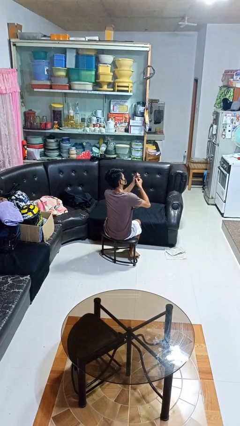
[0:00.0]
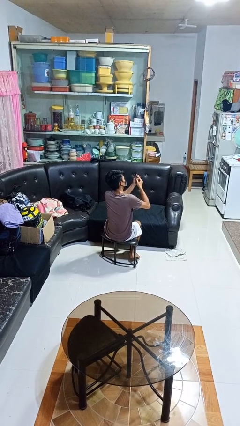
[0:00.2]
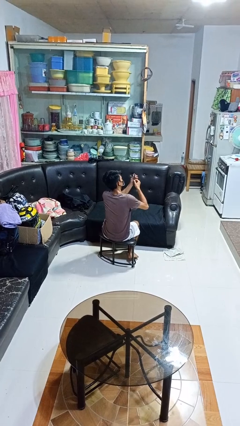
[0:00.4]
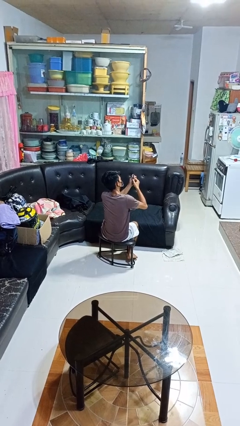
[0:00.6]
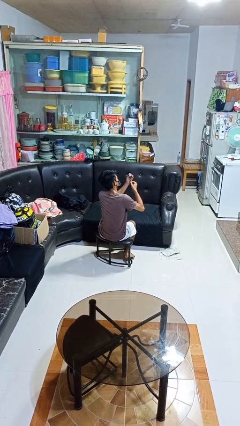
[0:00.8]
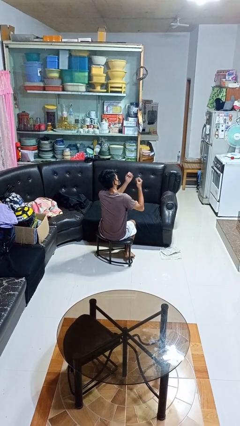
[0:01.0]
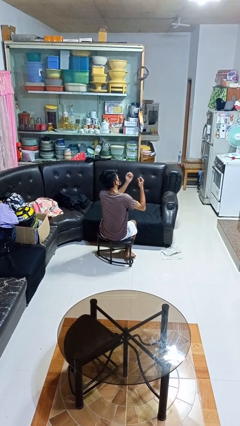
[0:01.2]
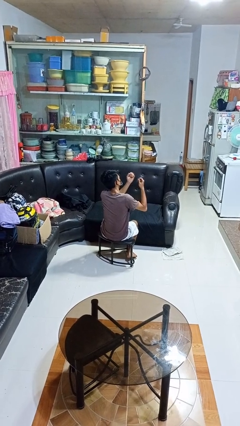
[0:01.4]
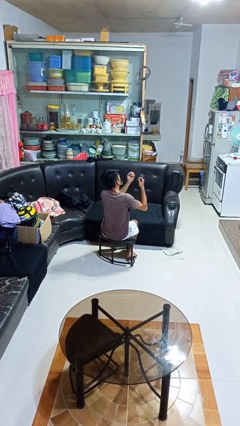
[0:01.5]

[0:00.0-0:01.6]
person files fingernails

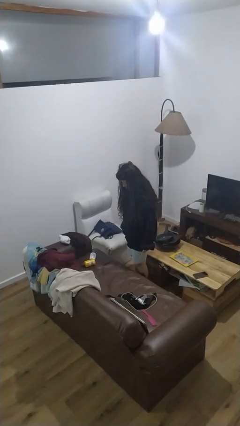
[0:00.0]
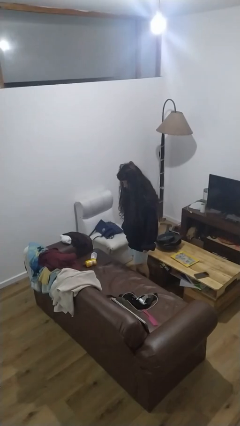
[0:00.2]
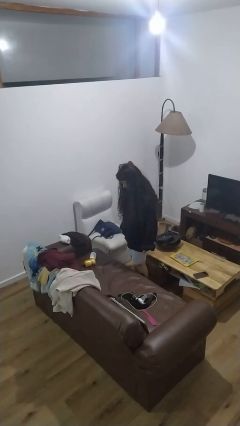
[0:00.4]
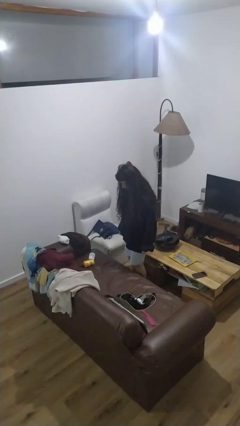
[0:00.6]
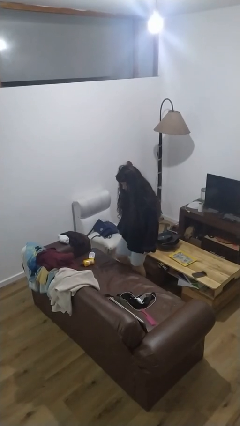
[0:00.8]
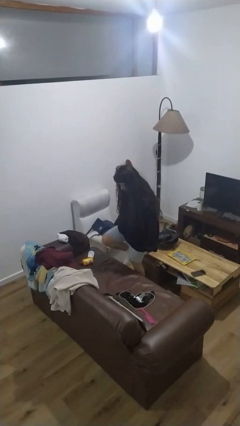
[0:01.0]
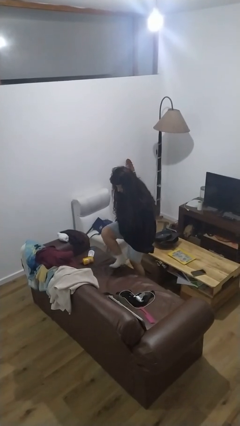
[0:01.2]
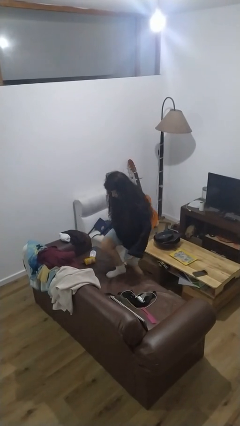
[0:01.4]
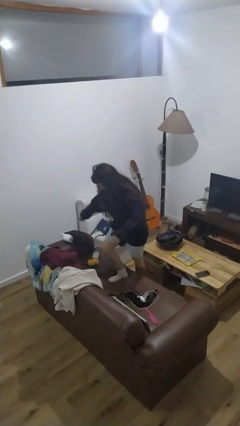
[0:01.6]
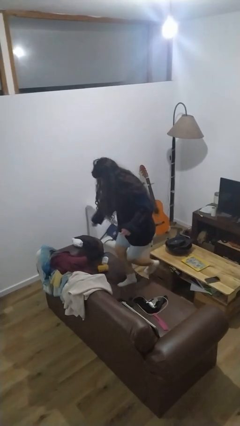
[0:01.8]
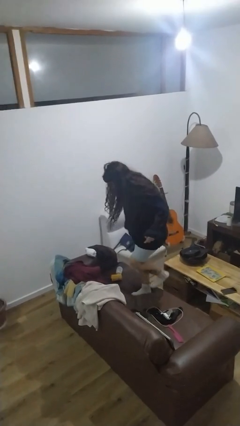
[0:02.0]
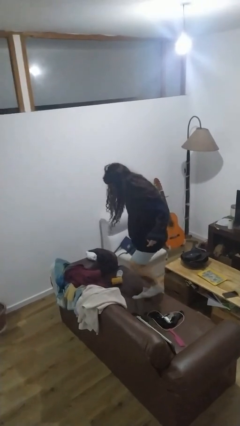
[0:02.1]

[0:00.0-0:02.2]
person climbs on couch

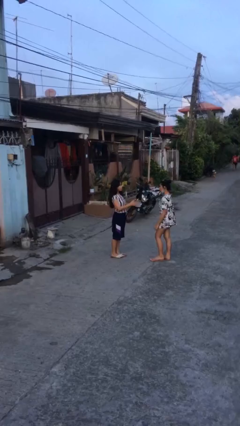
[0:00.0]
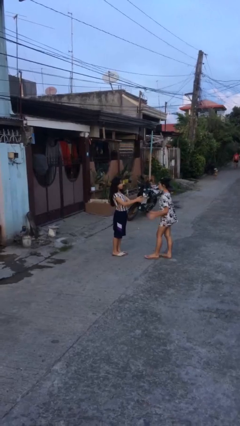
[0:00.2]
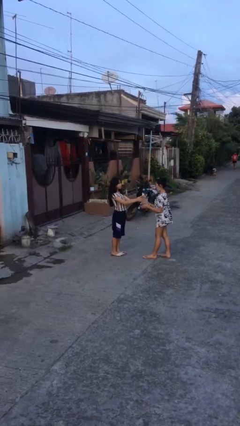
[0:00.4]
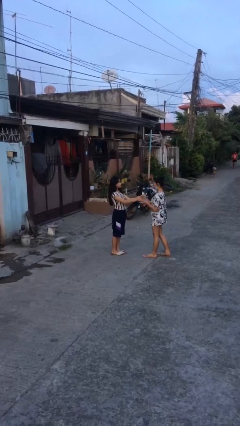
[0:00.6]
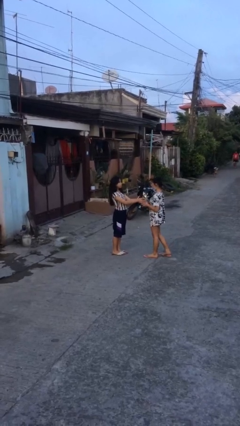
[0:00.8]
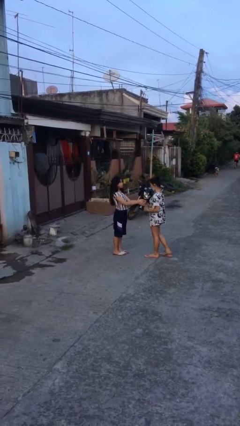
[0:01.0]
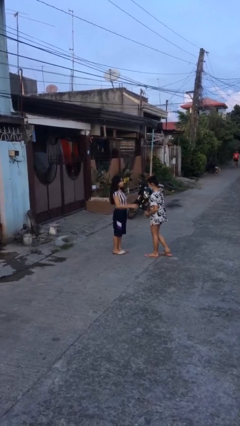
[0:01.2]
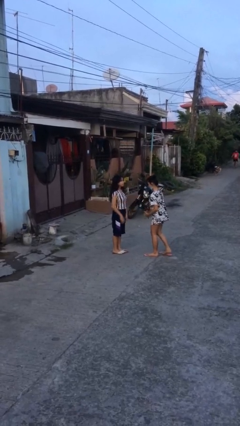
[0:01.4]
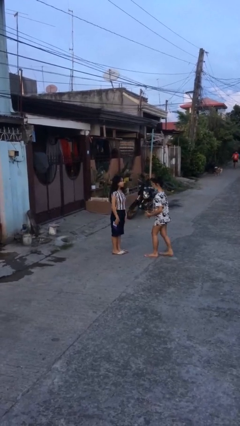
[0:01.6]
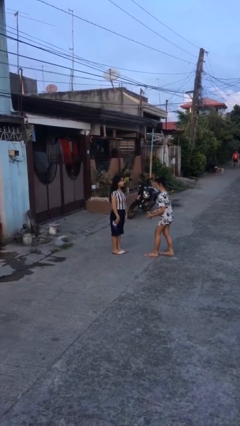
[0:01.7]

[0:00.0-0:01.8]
person transfers object to person

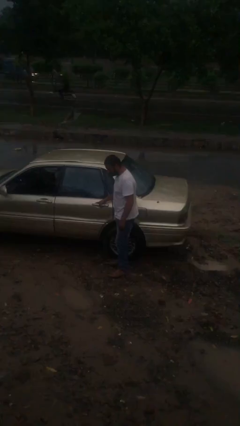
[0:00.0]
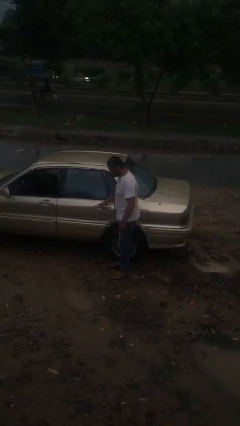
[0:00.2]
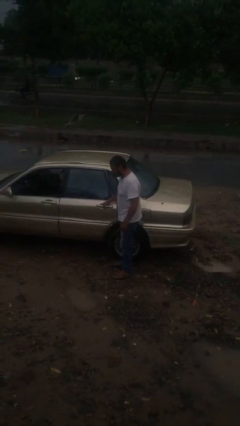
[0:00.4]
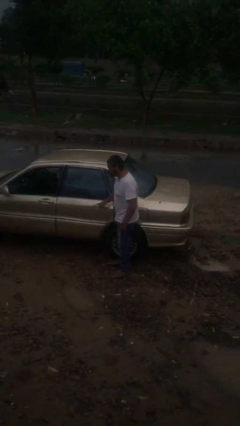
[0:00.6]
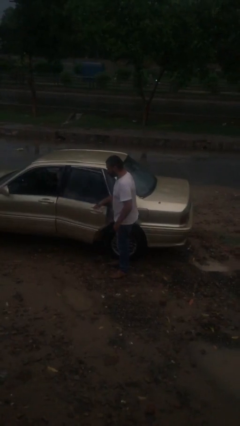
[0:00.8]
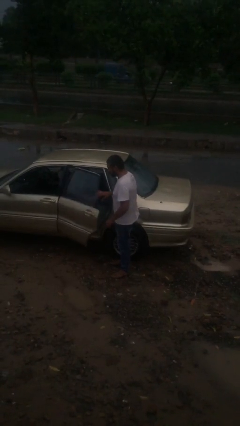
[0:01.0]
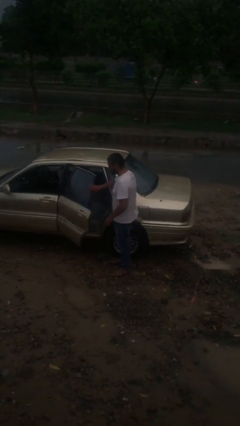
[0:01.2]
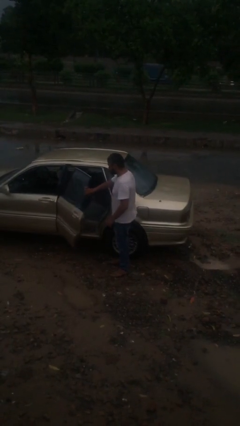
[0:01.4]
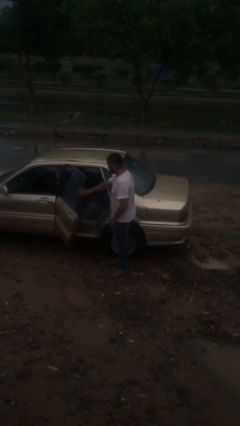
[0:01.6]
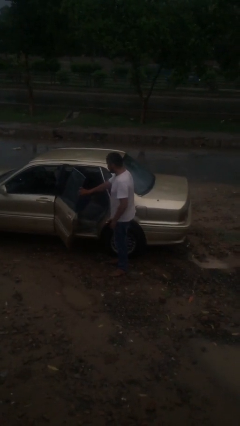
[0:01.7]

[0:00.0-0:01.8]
person opens car door

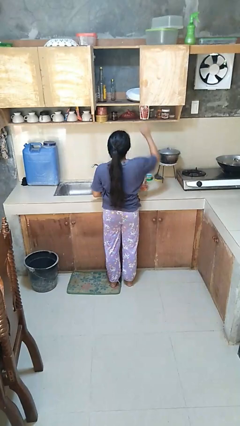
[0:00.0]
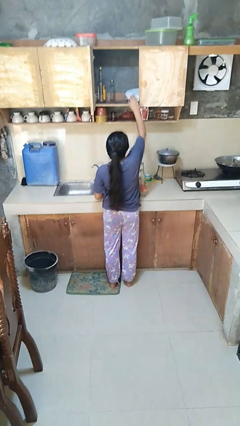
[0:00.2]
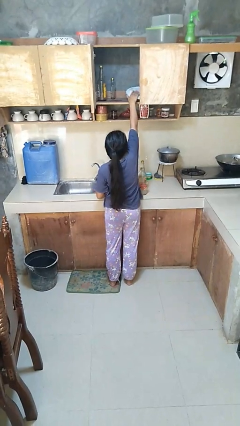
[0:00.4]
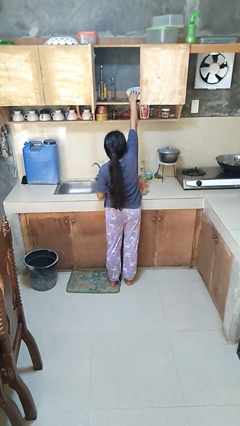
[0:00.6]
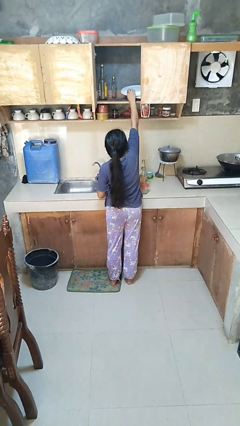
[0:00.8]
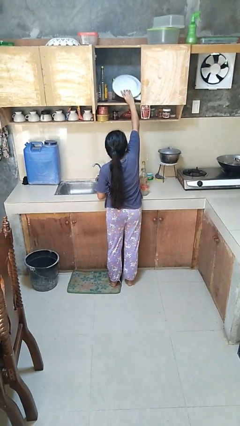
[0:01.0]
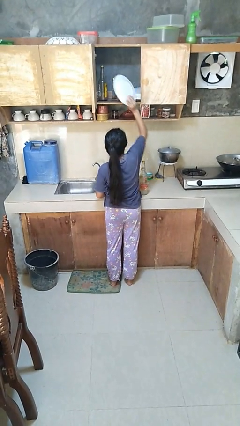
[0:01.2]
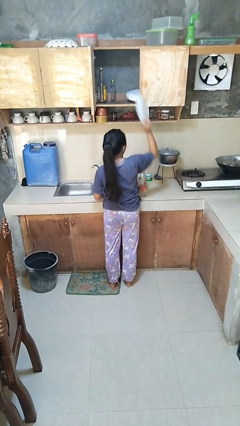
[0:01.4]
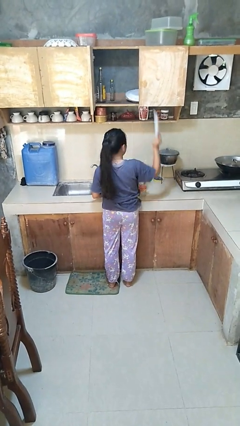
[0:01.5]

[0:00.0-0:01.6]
person takes object from cabinet

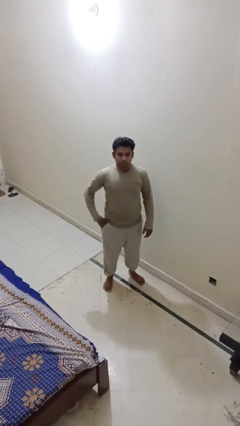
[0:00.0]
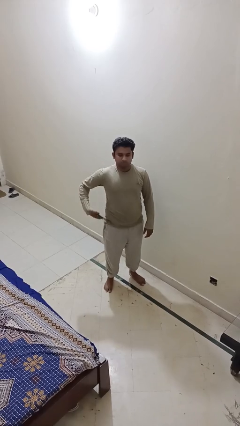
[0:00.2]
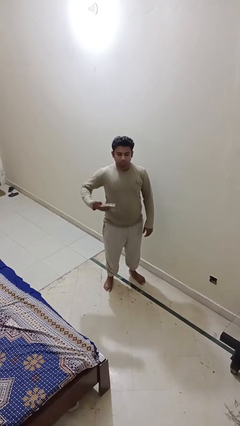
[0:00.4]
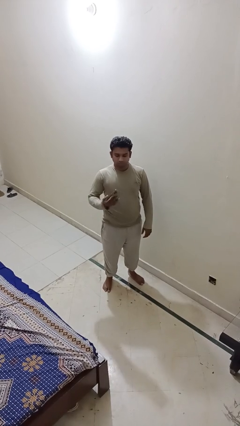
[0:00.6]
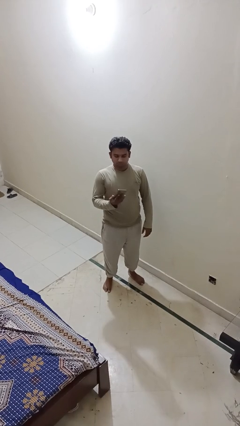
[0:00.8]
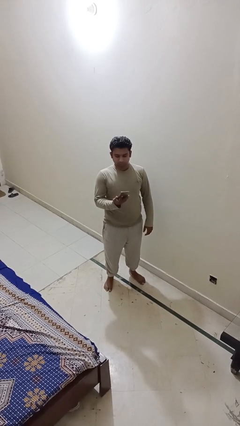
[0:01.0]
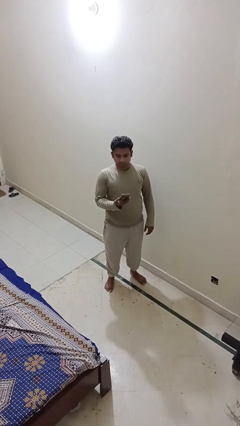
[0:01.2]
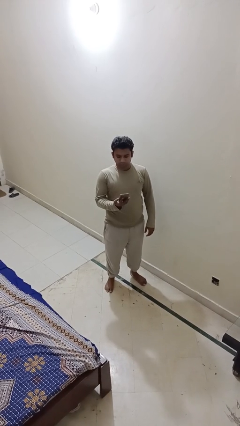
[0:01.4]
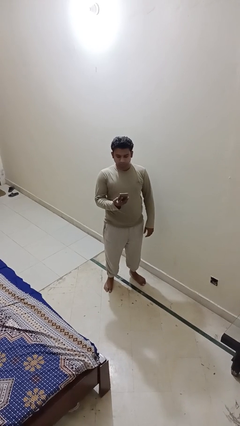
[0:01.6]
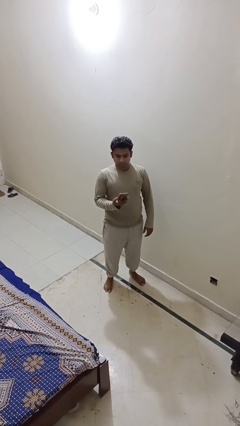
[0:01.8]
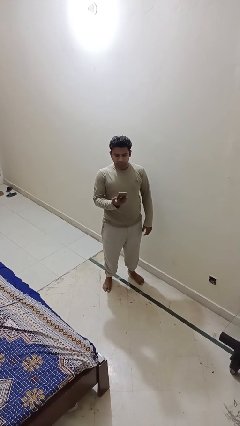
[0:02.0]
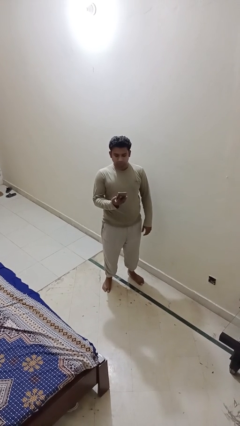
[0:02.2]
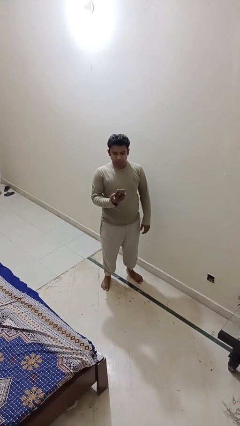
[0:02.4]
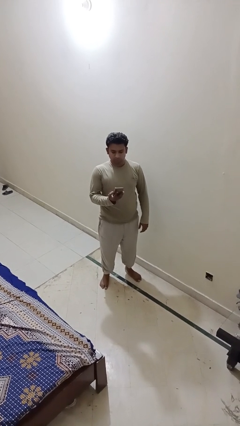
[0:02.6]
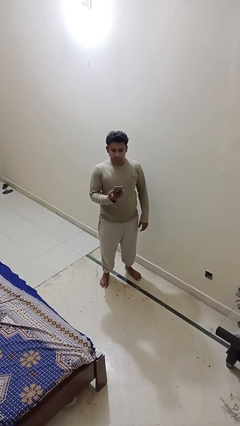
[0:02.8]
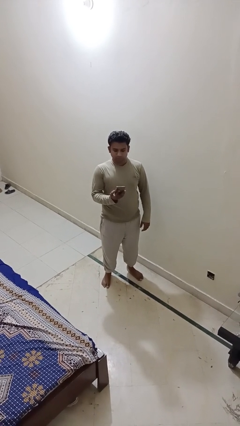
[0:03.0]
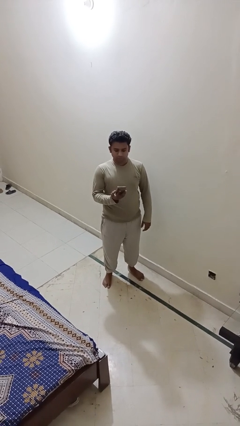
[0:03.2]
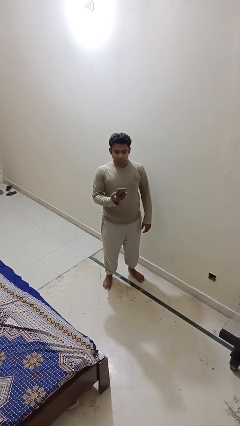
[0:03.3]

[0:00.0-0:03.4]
person takes phone from pocket

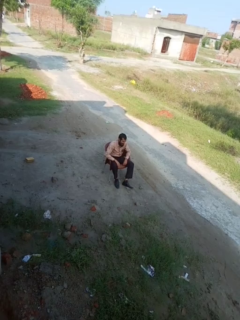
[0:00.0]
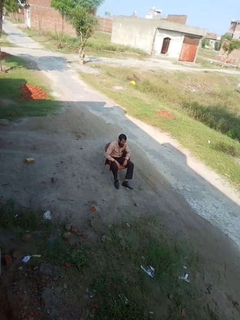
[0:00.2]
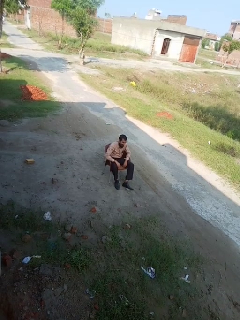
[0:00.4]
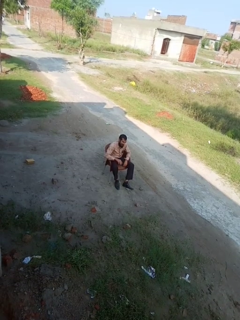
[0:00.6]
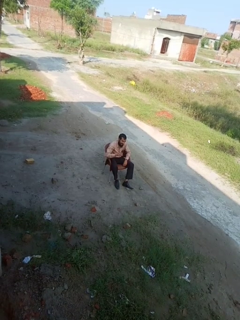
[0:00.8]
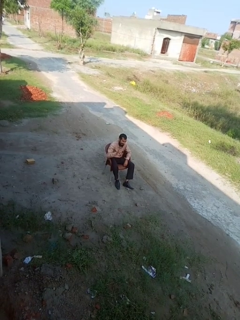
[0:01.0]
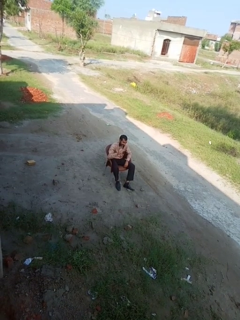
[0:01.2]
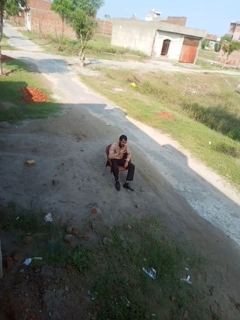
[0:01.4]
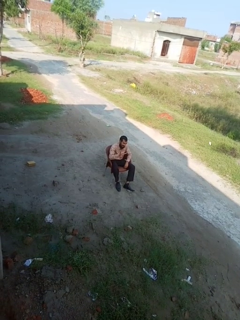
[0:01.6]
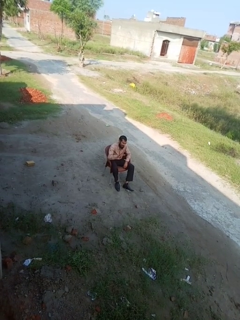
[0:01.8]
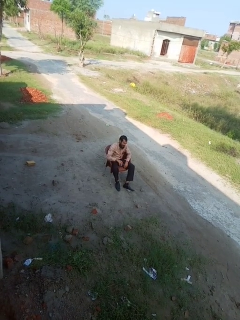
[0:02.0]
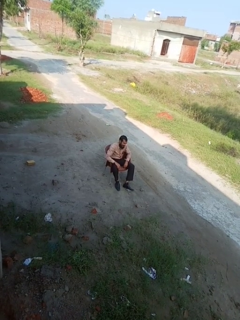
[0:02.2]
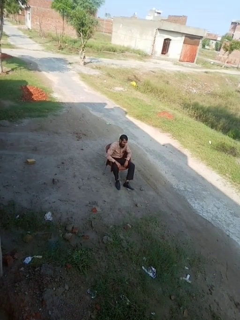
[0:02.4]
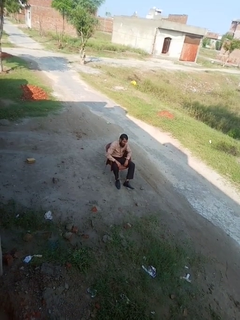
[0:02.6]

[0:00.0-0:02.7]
person gestures number five

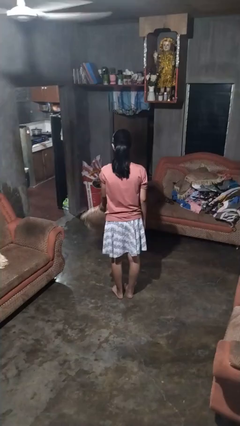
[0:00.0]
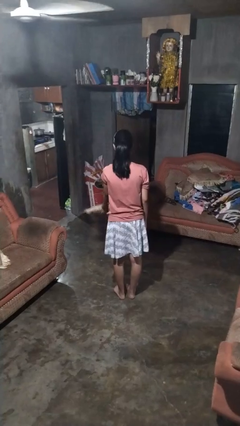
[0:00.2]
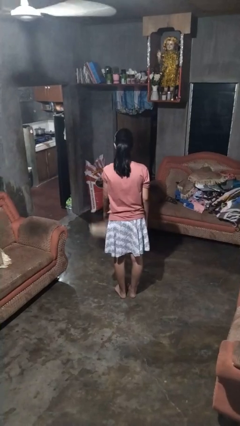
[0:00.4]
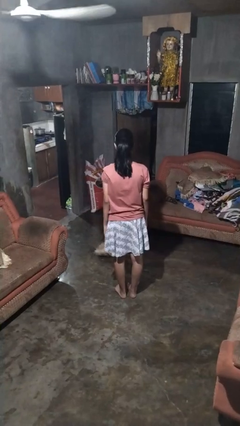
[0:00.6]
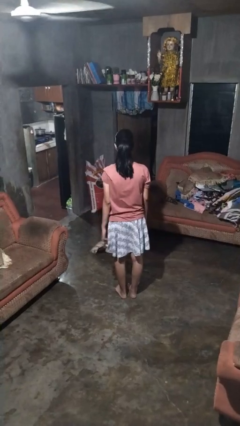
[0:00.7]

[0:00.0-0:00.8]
person throws object to ground

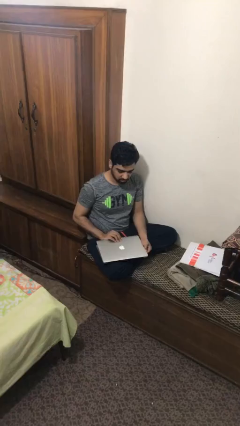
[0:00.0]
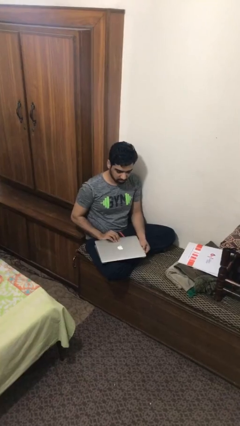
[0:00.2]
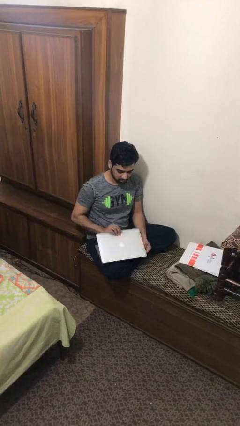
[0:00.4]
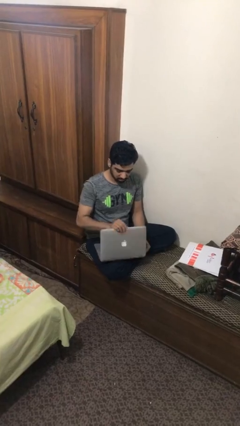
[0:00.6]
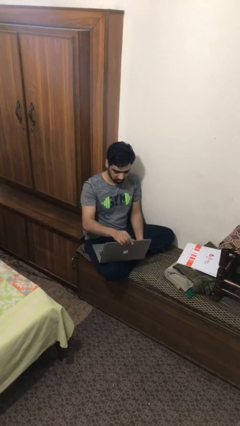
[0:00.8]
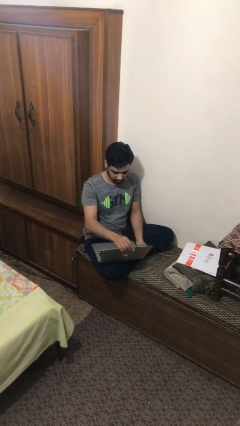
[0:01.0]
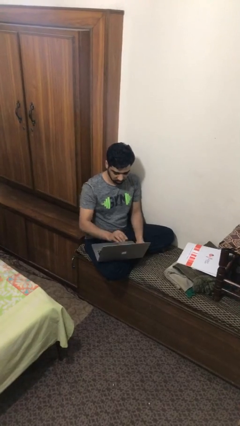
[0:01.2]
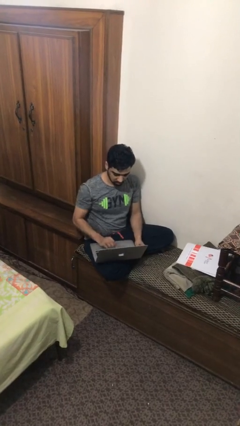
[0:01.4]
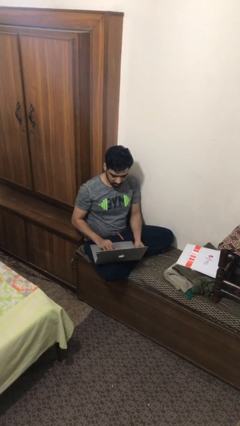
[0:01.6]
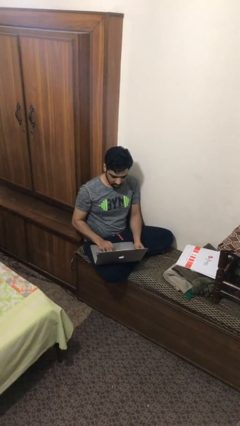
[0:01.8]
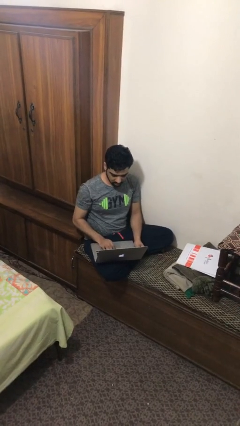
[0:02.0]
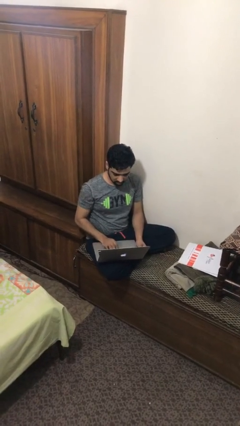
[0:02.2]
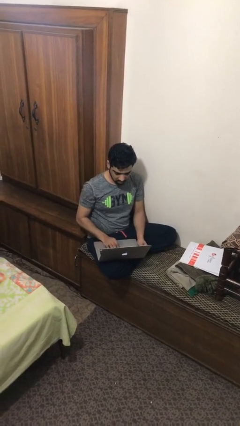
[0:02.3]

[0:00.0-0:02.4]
person interacts with laptop
